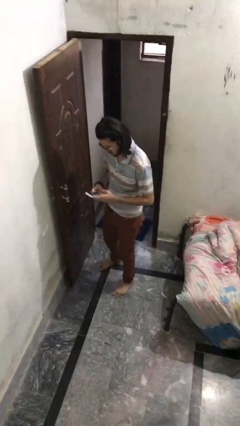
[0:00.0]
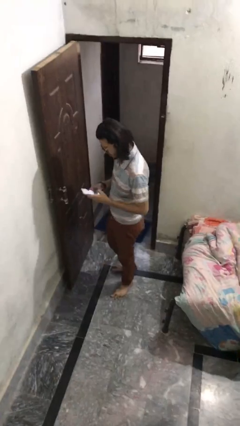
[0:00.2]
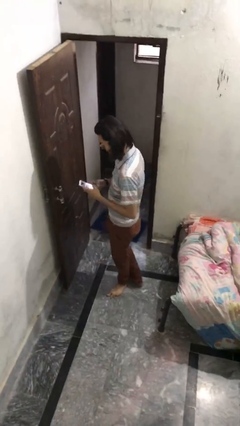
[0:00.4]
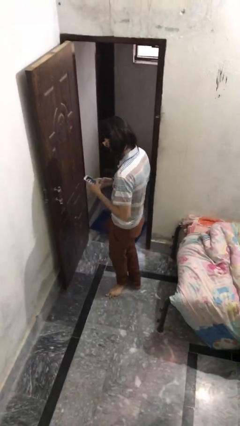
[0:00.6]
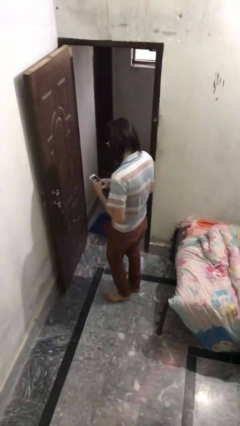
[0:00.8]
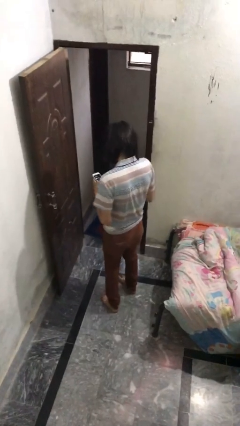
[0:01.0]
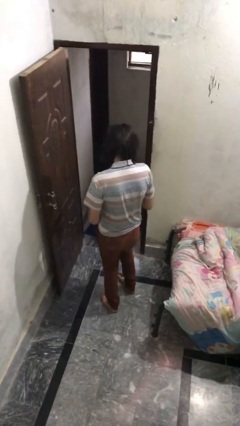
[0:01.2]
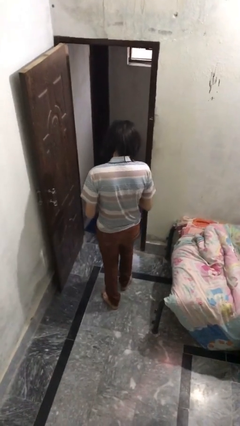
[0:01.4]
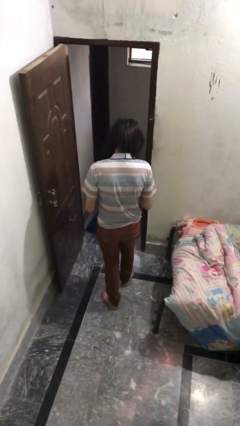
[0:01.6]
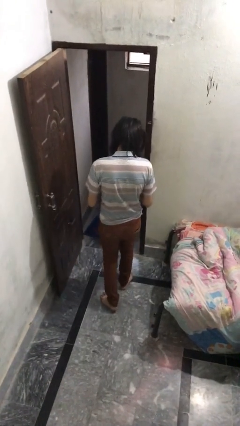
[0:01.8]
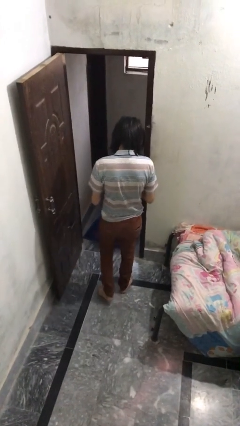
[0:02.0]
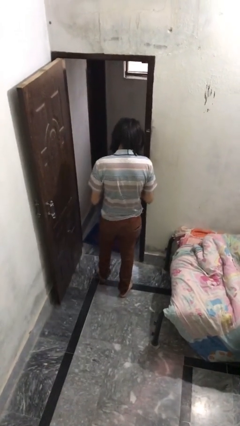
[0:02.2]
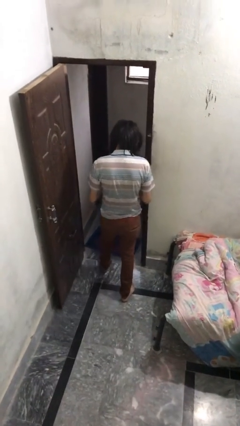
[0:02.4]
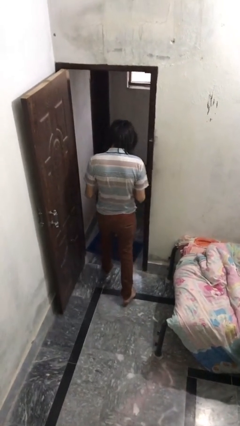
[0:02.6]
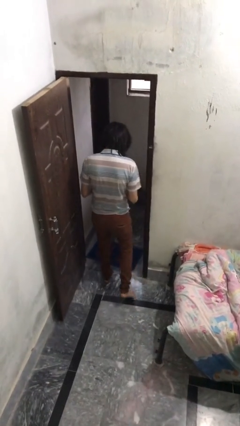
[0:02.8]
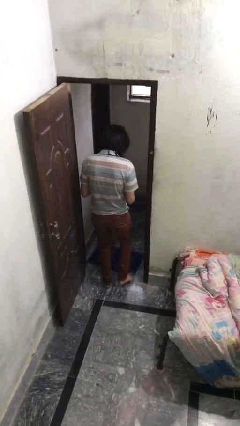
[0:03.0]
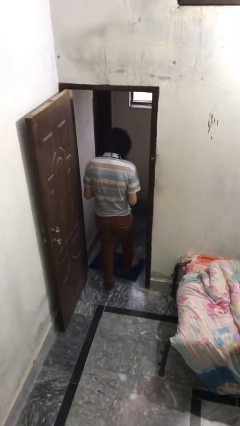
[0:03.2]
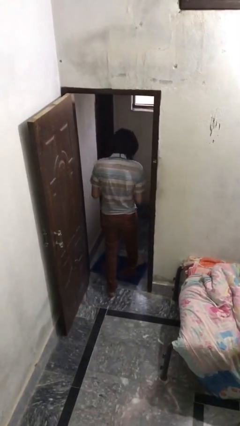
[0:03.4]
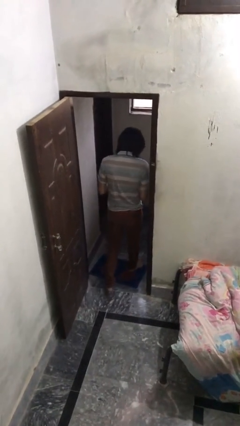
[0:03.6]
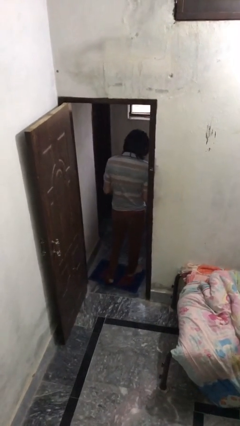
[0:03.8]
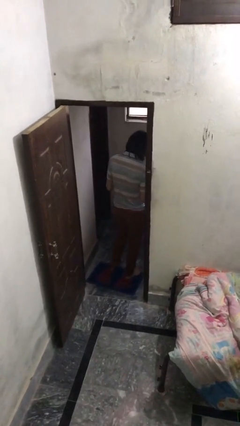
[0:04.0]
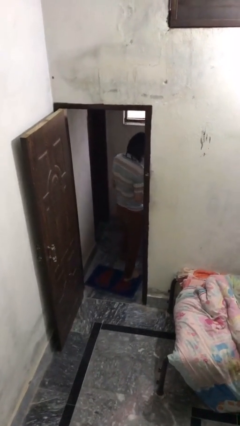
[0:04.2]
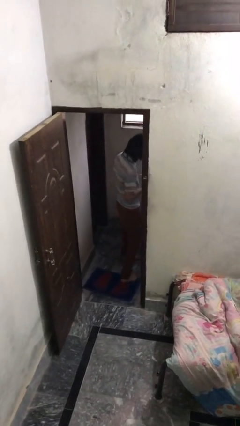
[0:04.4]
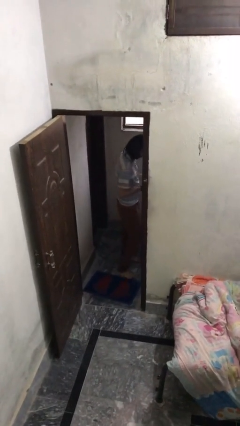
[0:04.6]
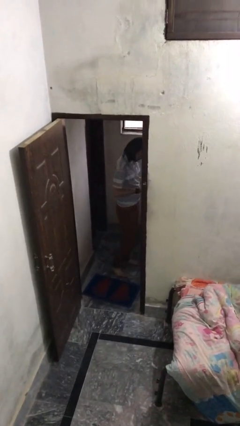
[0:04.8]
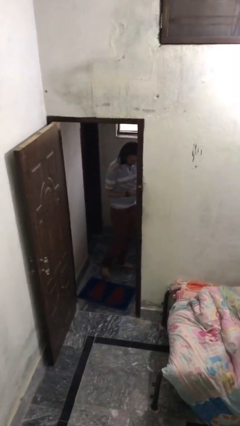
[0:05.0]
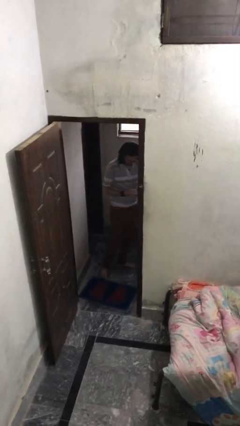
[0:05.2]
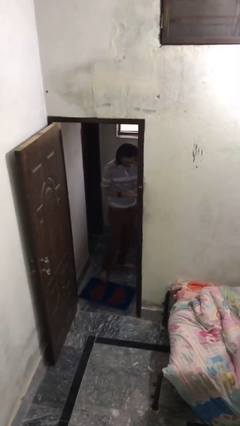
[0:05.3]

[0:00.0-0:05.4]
person exits scene through structure

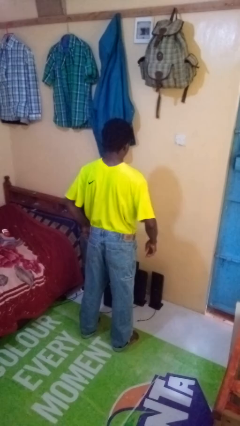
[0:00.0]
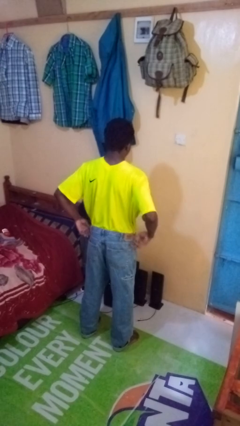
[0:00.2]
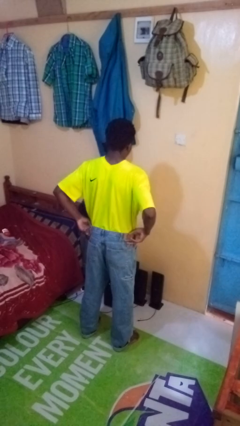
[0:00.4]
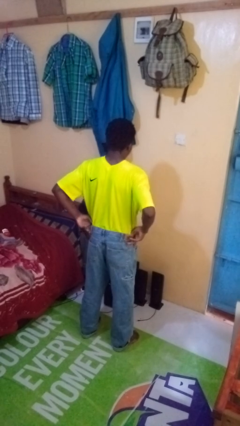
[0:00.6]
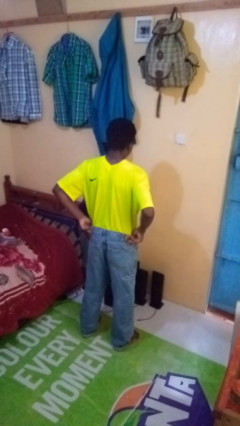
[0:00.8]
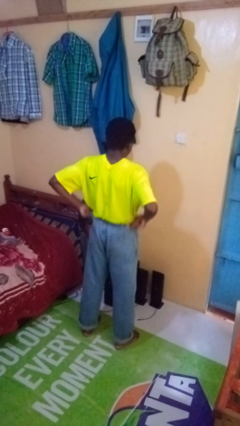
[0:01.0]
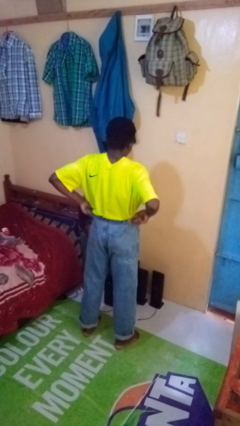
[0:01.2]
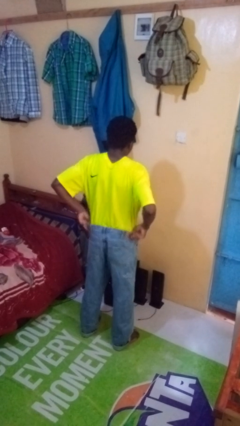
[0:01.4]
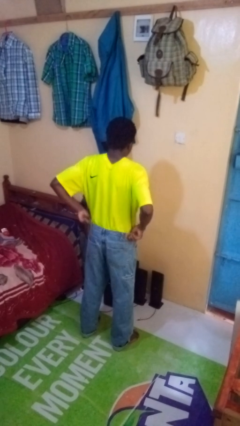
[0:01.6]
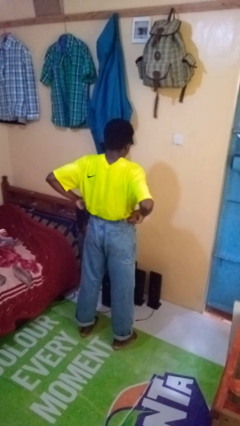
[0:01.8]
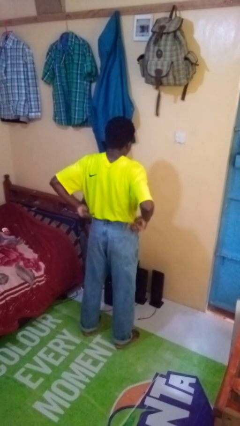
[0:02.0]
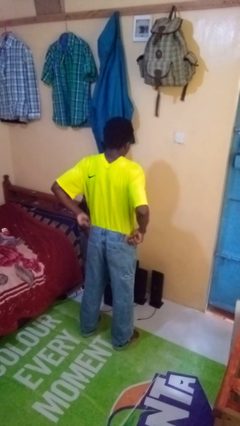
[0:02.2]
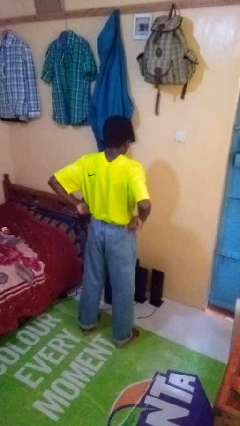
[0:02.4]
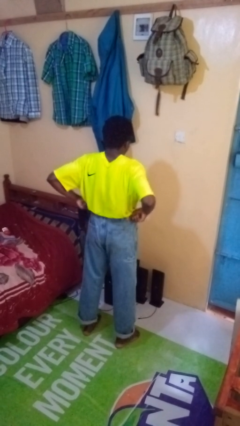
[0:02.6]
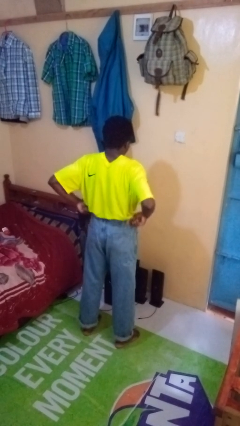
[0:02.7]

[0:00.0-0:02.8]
person hikes up pants

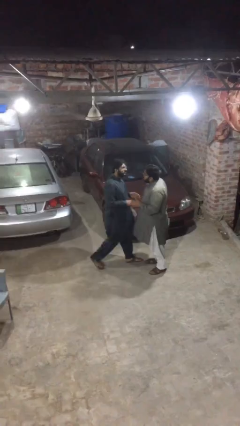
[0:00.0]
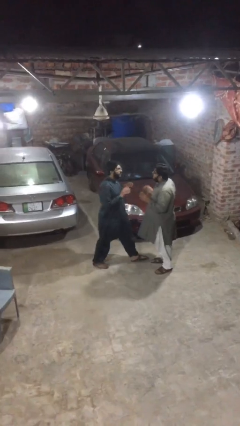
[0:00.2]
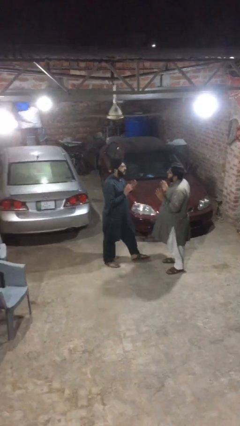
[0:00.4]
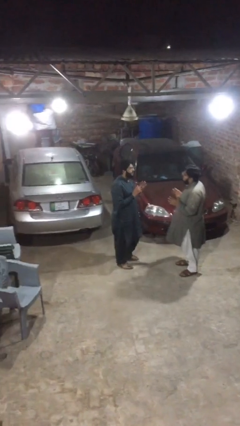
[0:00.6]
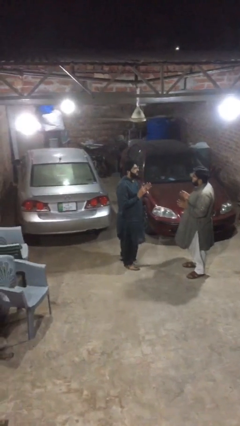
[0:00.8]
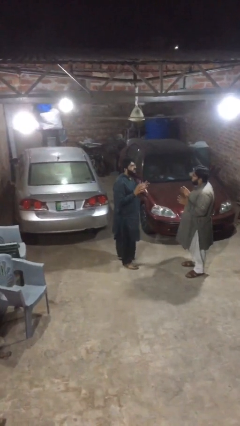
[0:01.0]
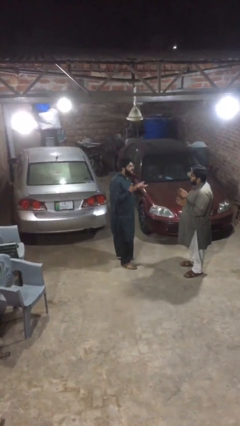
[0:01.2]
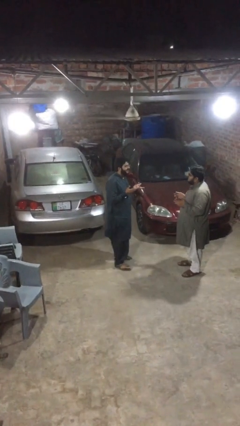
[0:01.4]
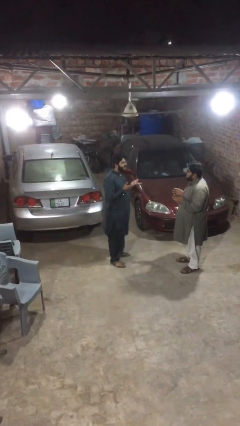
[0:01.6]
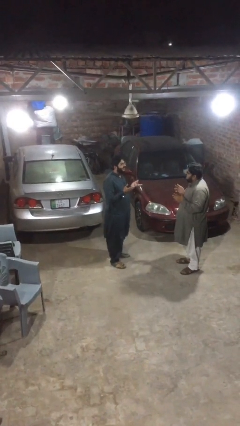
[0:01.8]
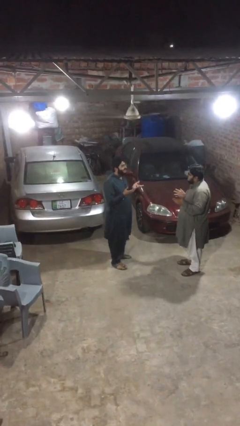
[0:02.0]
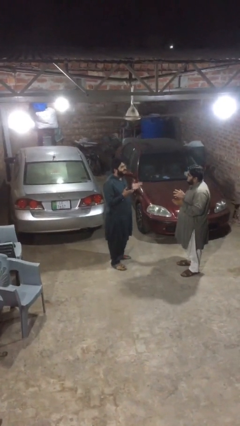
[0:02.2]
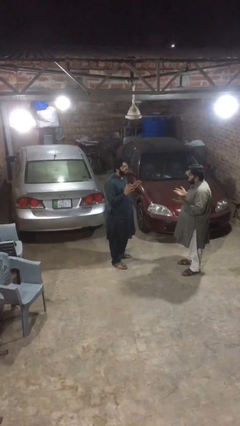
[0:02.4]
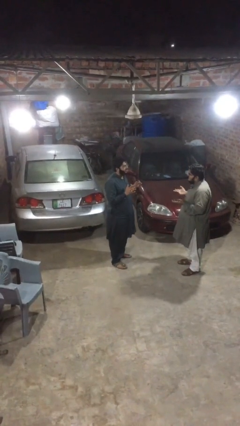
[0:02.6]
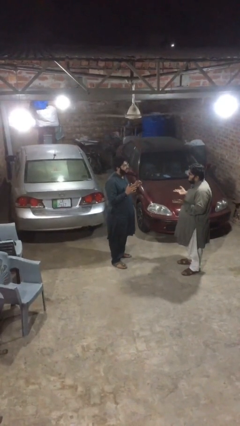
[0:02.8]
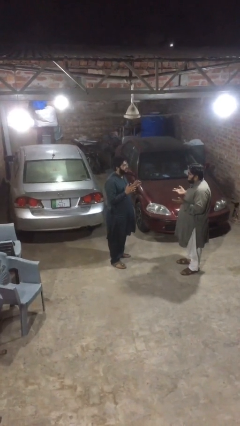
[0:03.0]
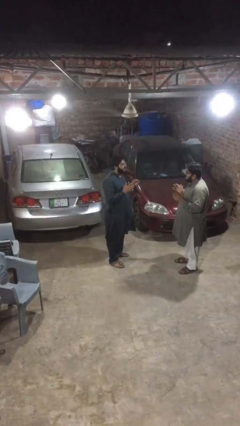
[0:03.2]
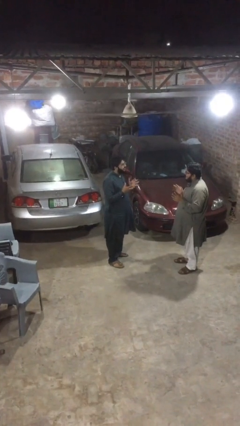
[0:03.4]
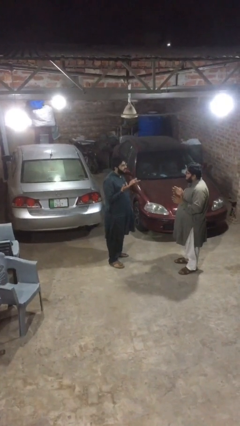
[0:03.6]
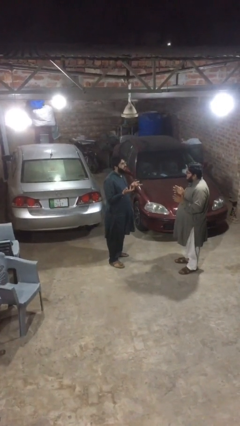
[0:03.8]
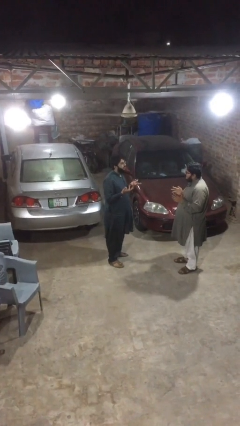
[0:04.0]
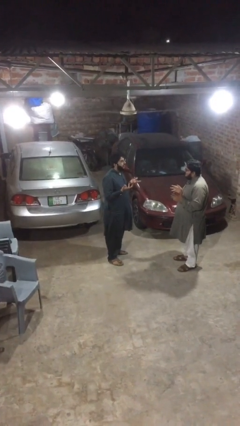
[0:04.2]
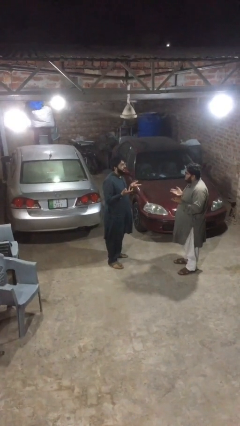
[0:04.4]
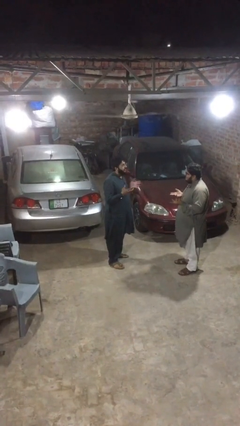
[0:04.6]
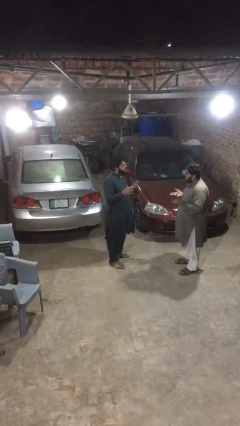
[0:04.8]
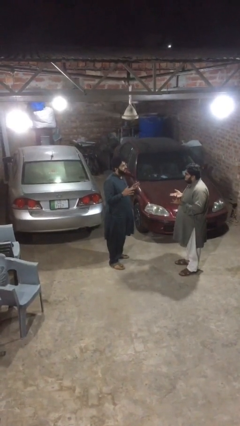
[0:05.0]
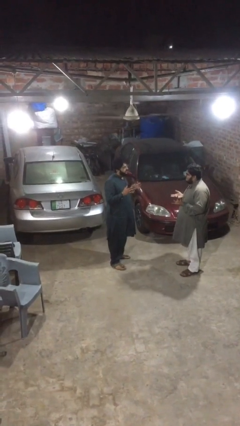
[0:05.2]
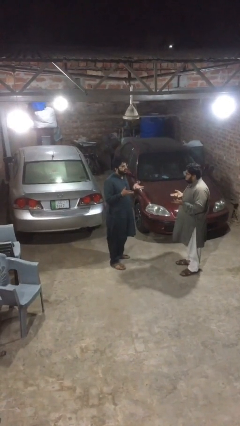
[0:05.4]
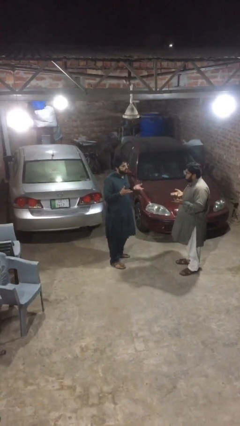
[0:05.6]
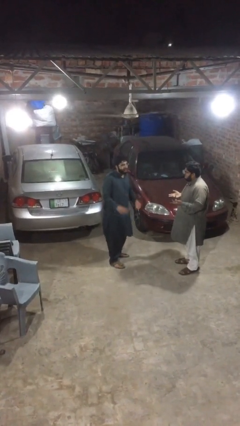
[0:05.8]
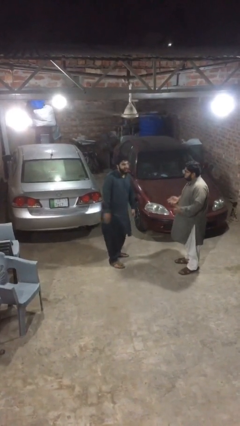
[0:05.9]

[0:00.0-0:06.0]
person talks to person

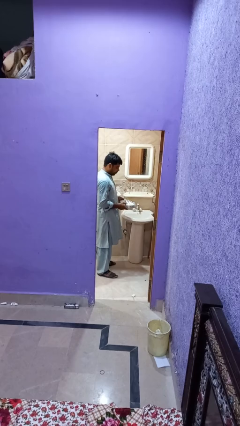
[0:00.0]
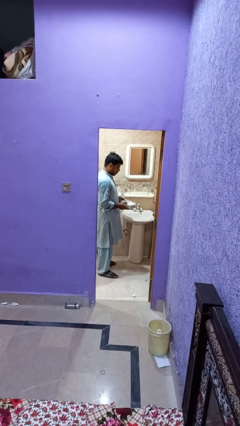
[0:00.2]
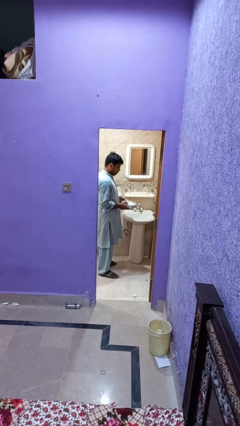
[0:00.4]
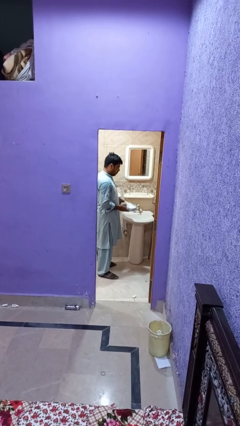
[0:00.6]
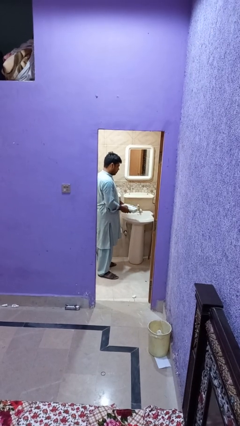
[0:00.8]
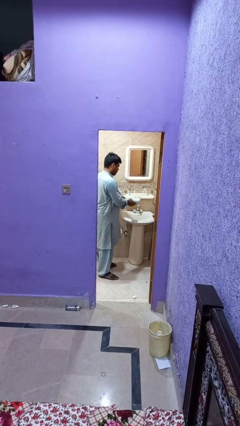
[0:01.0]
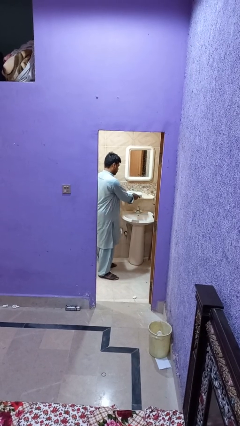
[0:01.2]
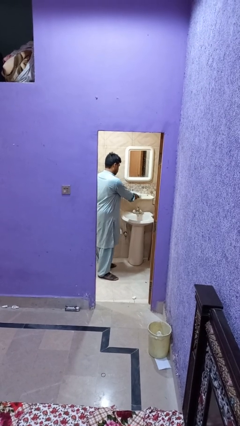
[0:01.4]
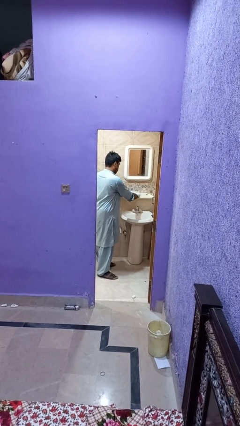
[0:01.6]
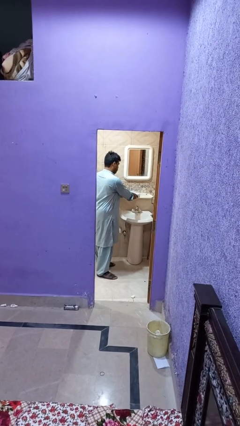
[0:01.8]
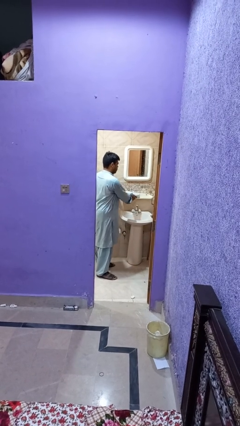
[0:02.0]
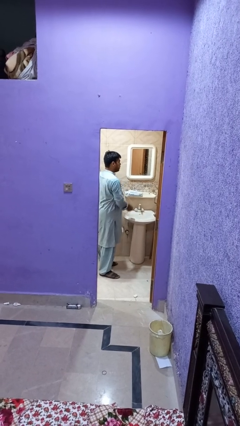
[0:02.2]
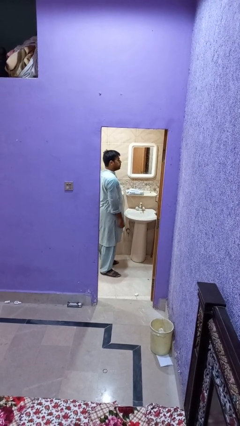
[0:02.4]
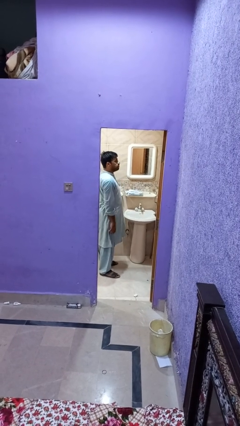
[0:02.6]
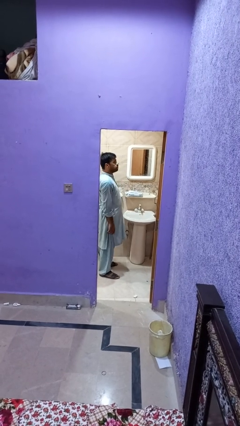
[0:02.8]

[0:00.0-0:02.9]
person puts down object on countertop

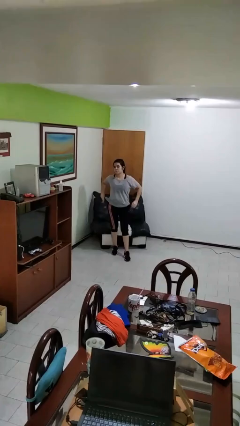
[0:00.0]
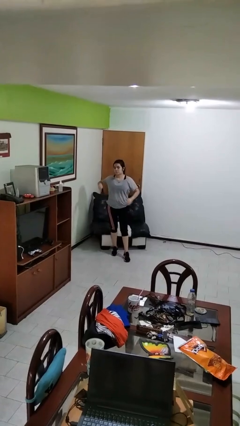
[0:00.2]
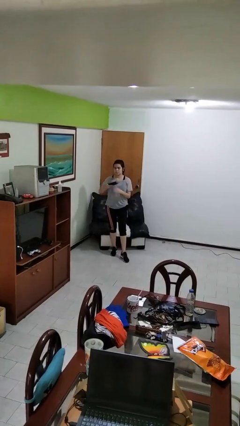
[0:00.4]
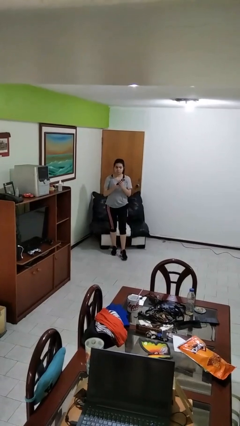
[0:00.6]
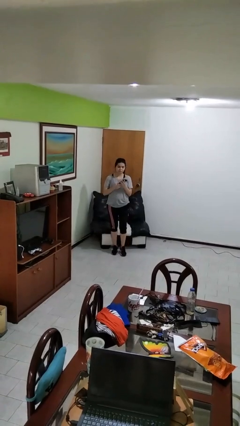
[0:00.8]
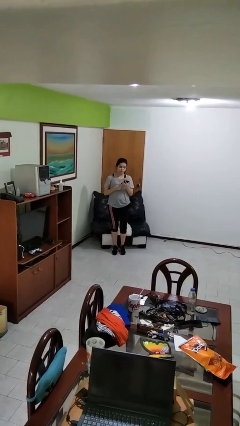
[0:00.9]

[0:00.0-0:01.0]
person takes phone from pocket
